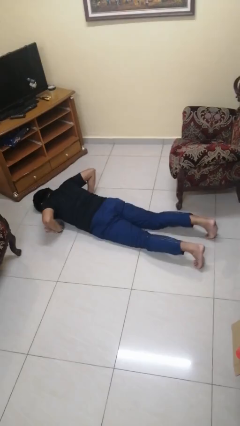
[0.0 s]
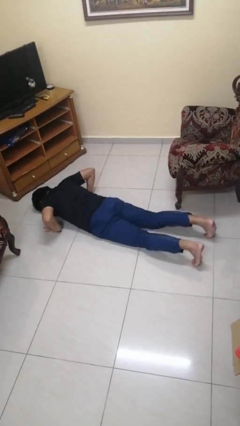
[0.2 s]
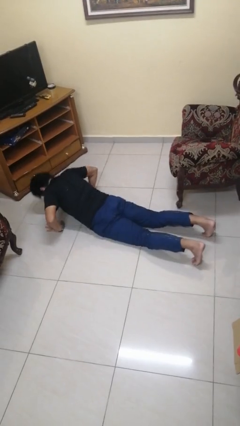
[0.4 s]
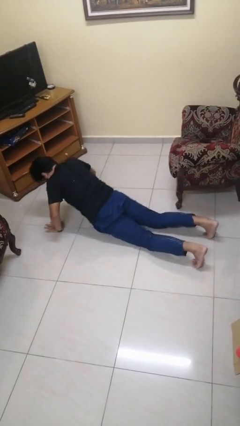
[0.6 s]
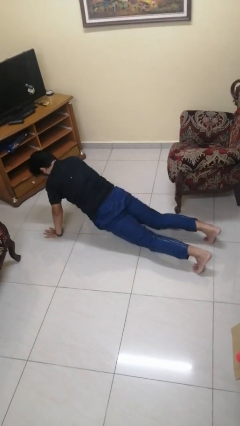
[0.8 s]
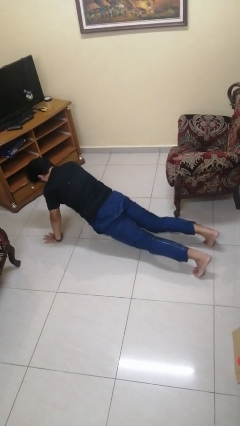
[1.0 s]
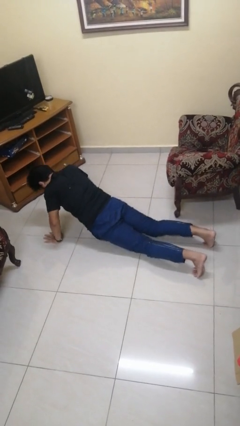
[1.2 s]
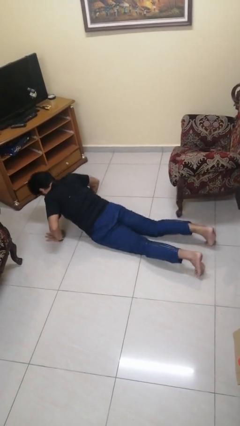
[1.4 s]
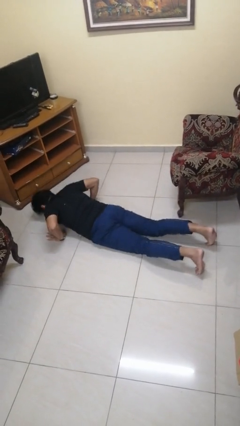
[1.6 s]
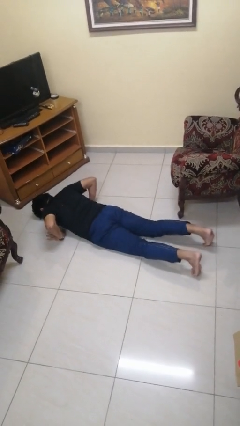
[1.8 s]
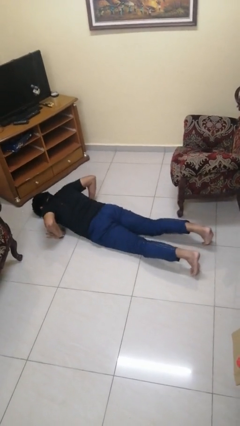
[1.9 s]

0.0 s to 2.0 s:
person exercises with pushup

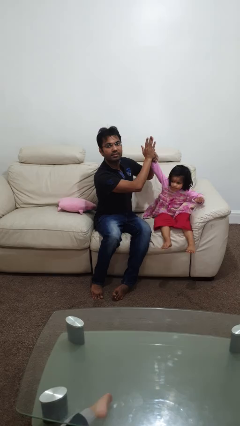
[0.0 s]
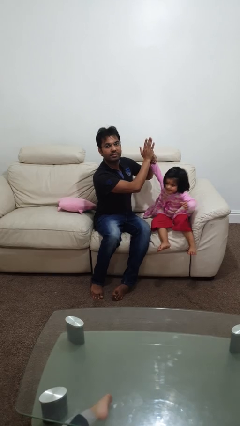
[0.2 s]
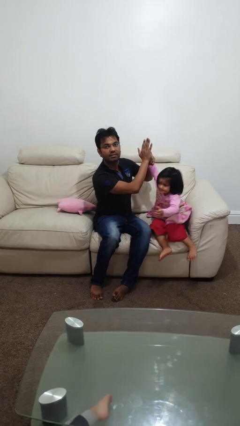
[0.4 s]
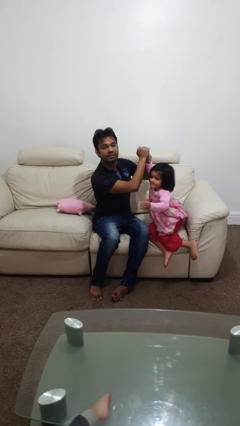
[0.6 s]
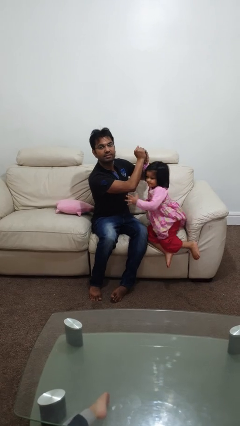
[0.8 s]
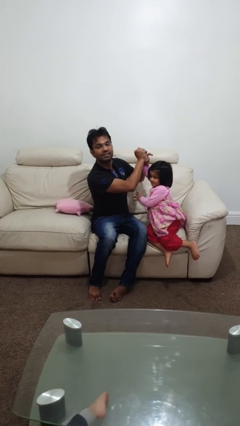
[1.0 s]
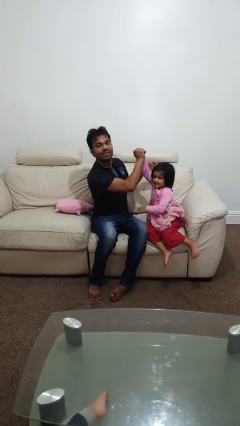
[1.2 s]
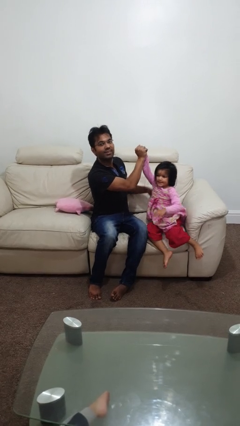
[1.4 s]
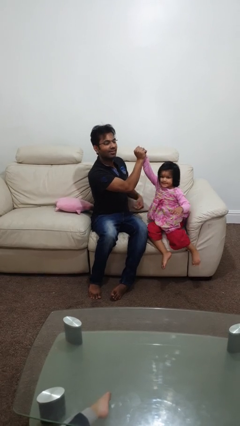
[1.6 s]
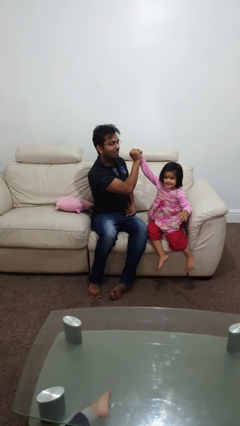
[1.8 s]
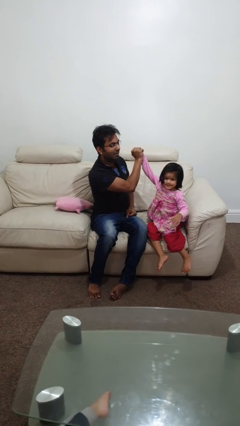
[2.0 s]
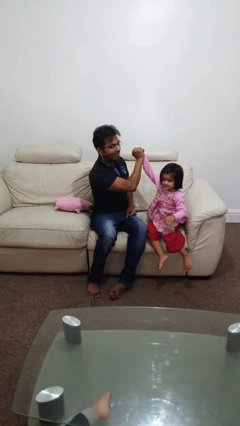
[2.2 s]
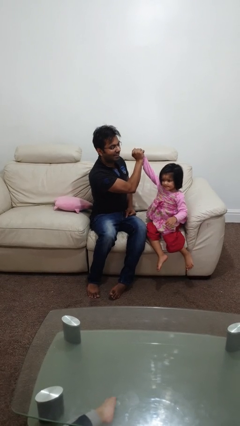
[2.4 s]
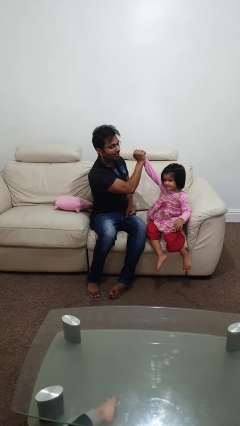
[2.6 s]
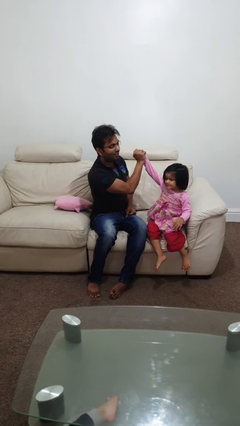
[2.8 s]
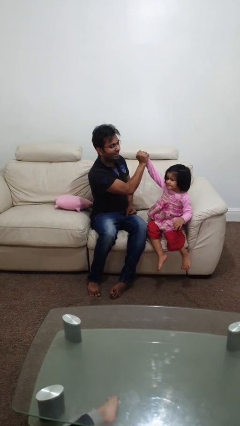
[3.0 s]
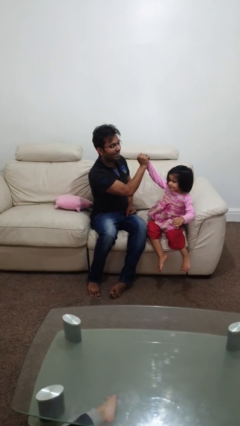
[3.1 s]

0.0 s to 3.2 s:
person highfives hand

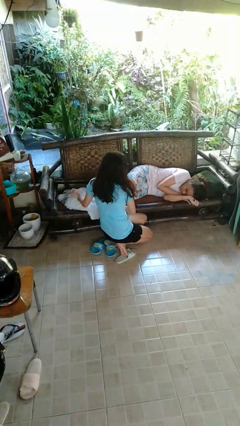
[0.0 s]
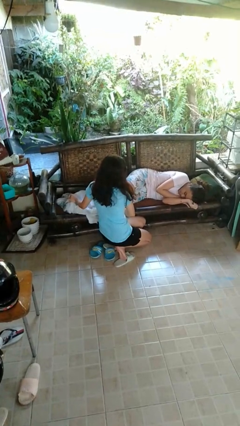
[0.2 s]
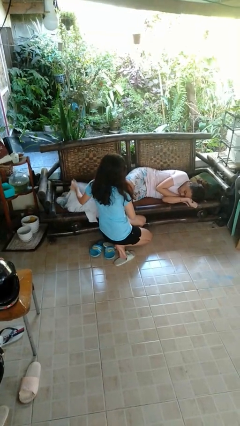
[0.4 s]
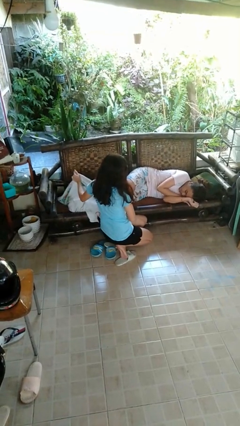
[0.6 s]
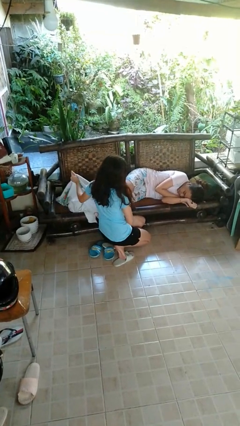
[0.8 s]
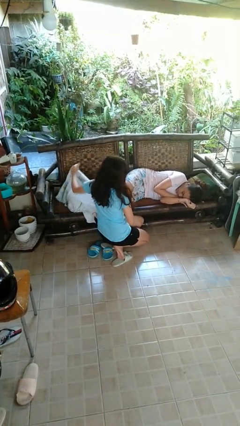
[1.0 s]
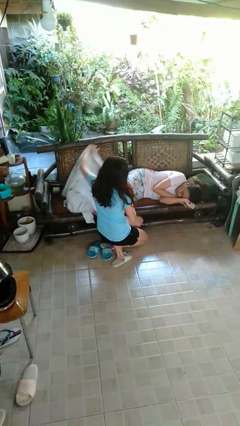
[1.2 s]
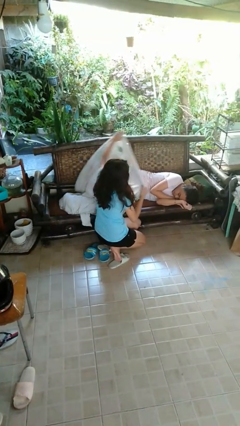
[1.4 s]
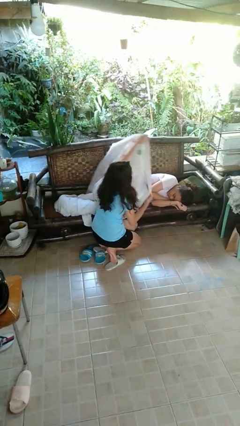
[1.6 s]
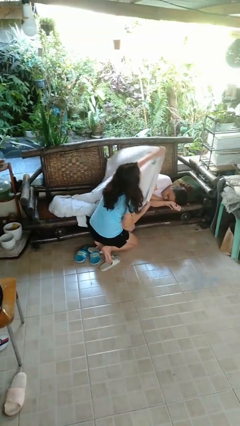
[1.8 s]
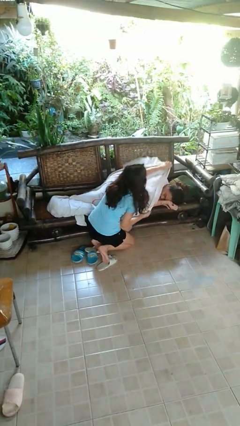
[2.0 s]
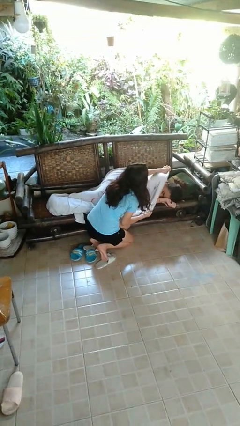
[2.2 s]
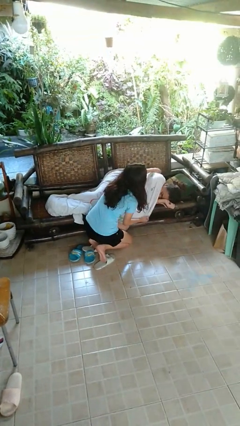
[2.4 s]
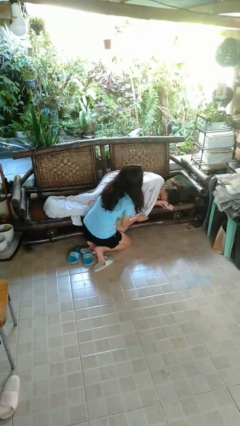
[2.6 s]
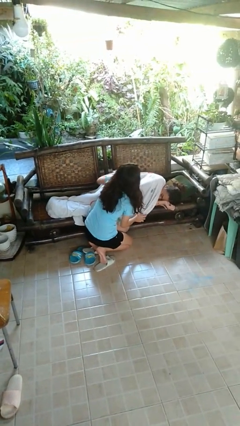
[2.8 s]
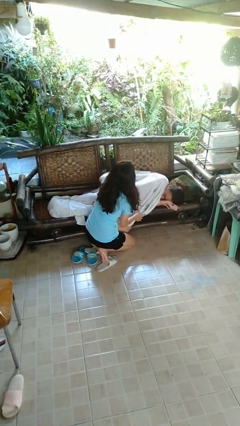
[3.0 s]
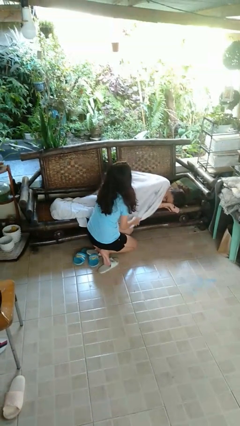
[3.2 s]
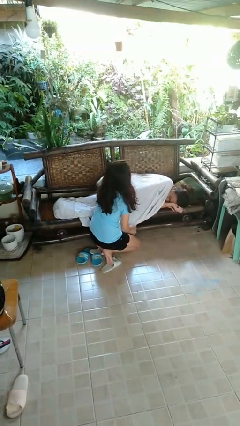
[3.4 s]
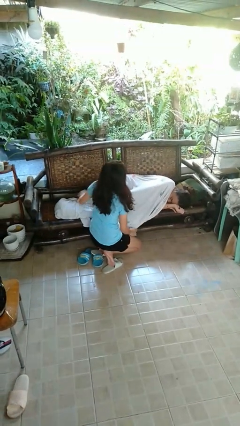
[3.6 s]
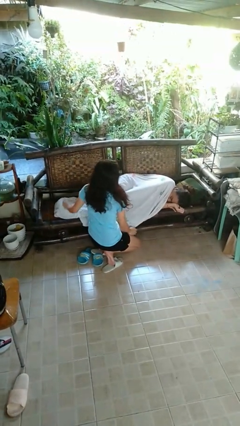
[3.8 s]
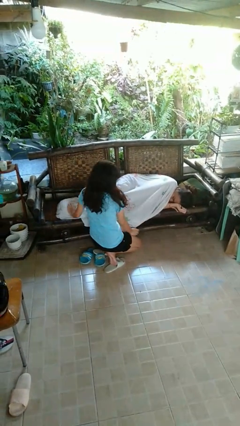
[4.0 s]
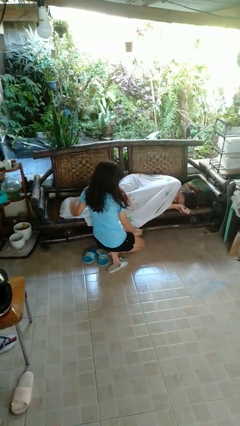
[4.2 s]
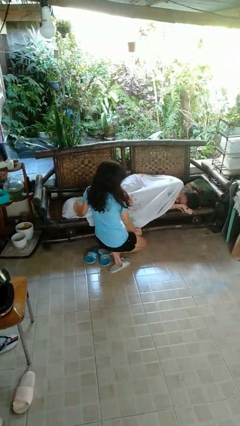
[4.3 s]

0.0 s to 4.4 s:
person covers friend with blanket

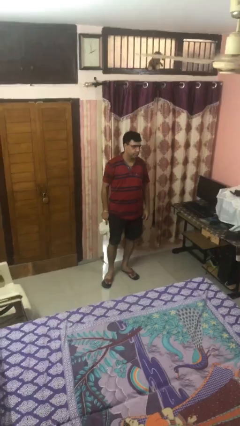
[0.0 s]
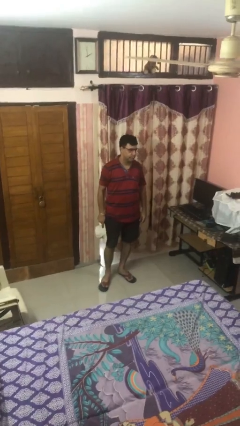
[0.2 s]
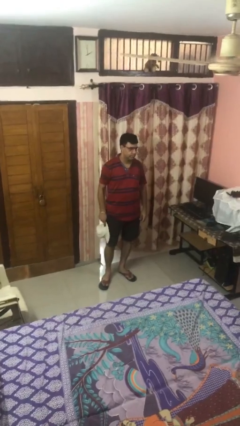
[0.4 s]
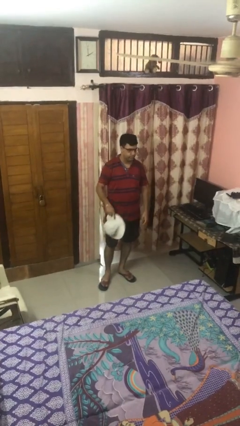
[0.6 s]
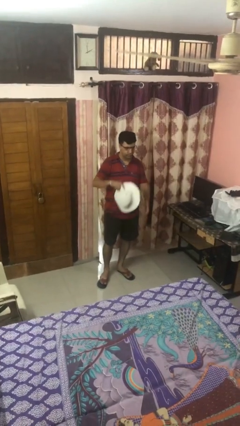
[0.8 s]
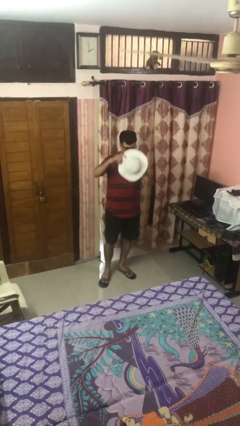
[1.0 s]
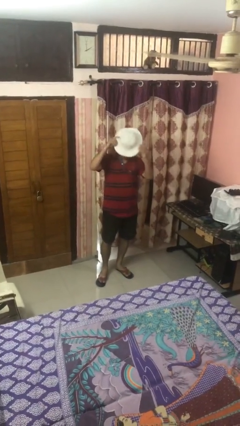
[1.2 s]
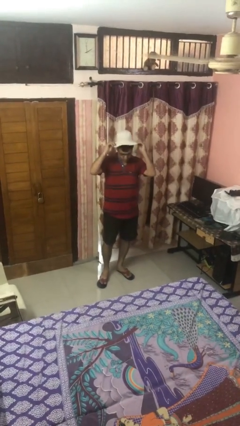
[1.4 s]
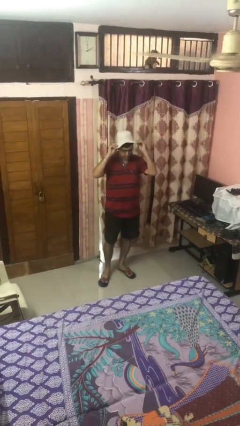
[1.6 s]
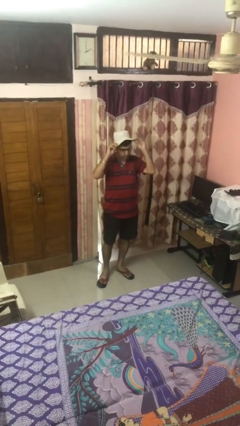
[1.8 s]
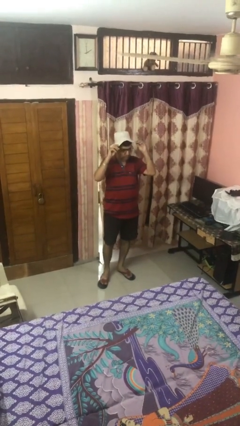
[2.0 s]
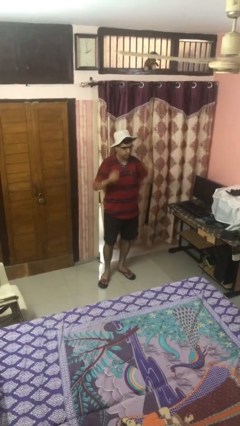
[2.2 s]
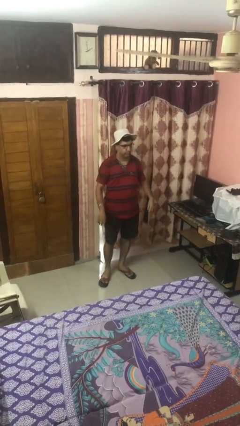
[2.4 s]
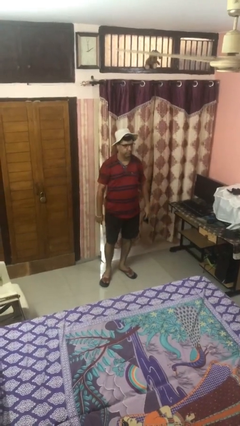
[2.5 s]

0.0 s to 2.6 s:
person puts on hat

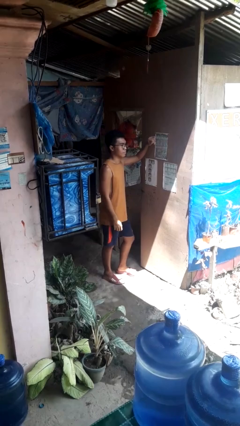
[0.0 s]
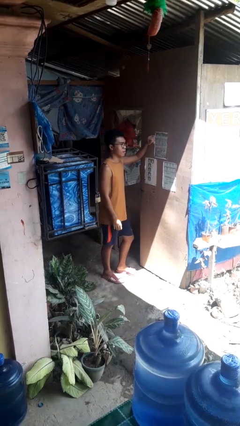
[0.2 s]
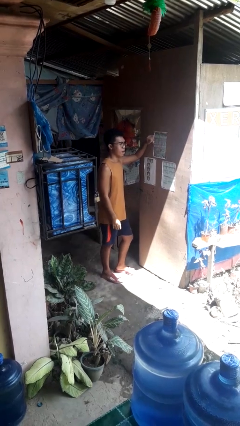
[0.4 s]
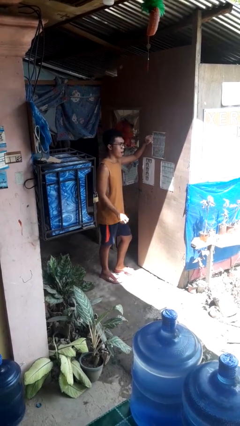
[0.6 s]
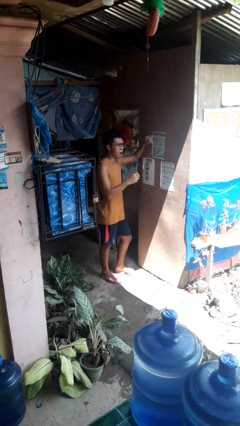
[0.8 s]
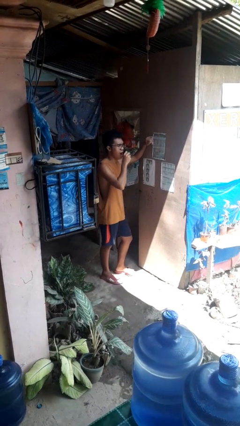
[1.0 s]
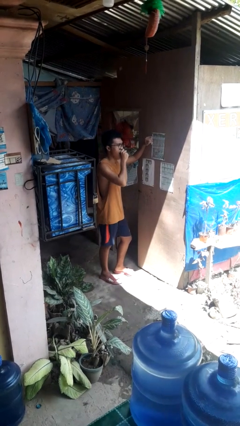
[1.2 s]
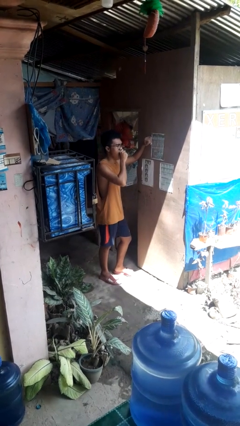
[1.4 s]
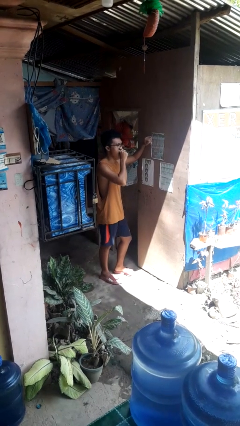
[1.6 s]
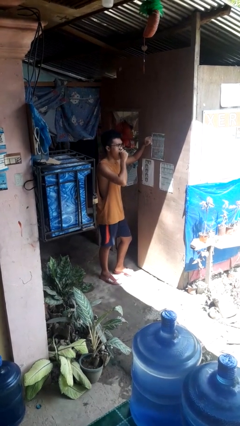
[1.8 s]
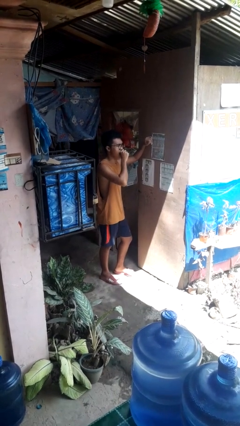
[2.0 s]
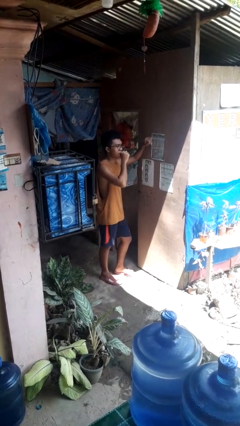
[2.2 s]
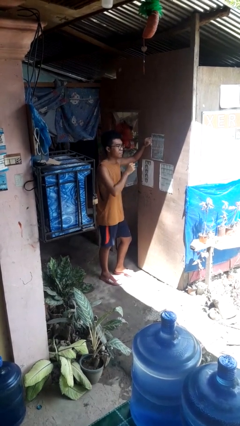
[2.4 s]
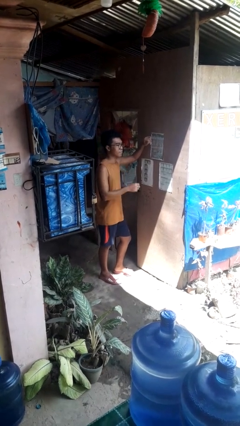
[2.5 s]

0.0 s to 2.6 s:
person yawns

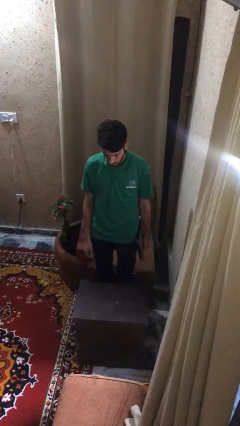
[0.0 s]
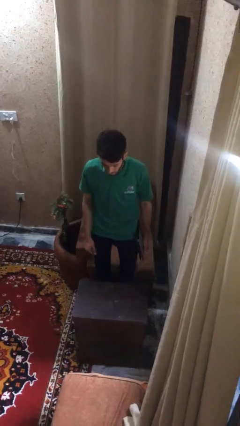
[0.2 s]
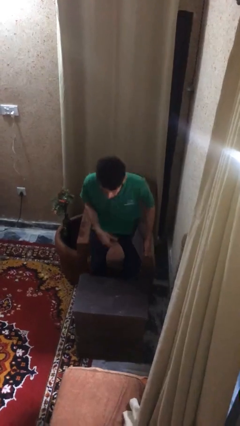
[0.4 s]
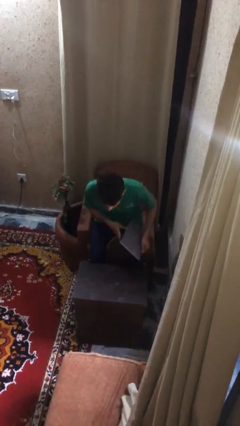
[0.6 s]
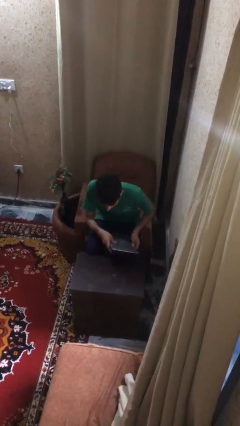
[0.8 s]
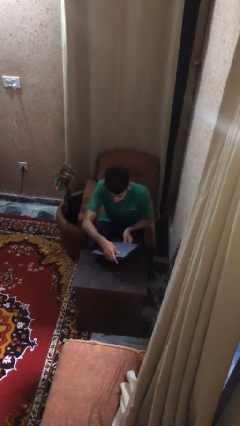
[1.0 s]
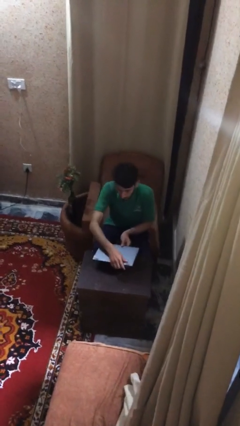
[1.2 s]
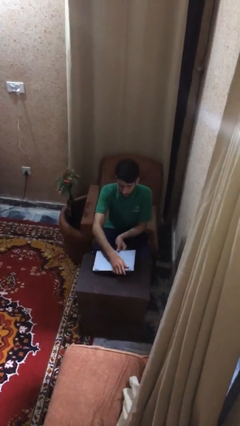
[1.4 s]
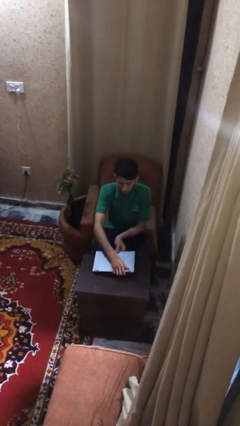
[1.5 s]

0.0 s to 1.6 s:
person sits down

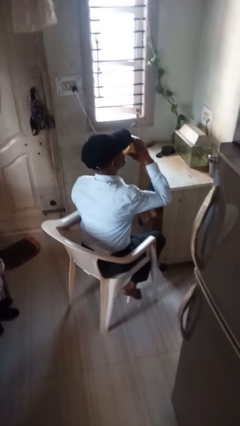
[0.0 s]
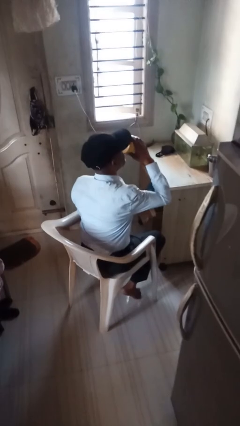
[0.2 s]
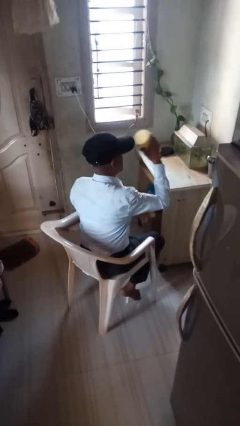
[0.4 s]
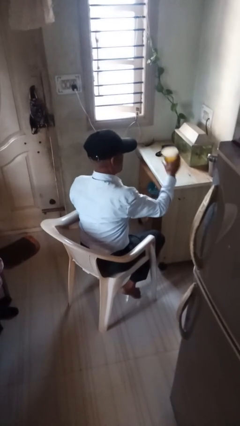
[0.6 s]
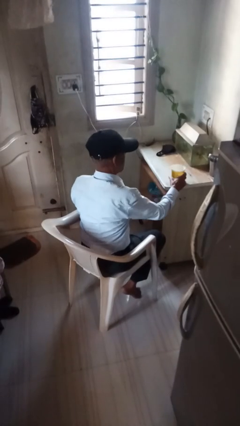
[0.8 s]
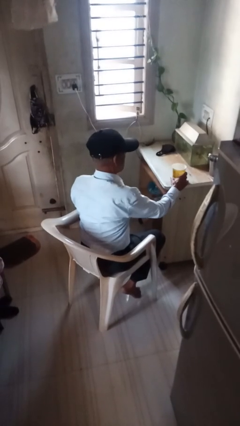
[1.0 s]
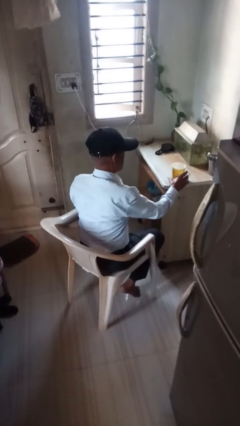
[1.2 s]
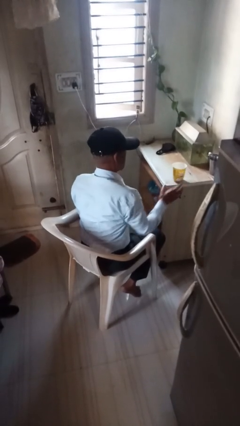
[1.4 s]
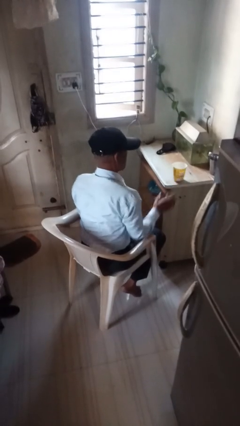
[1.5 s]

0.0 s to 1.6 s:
person puts down object on table
